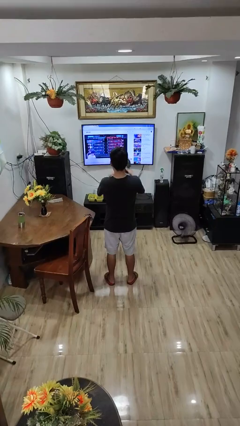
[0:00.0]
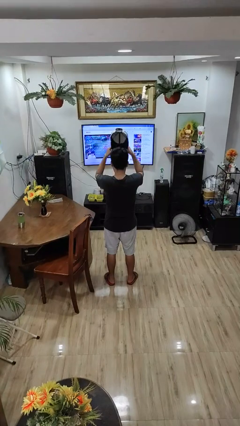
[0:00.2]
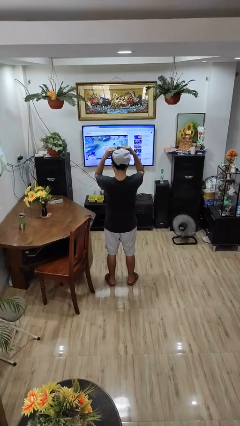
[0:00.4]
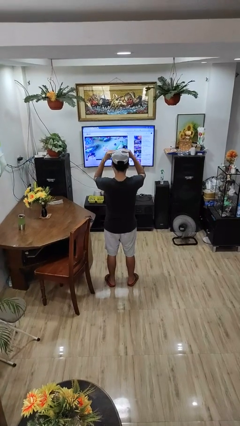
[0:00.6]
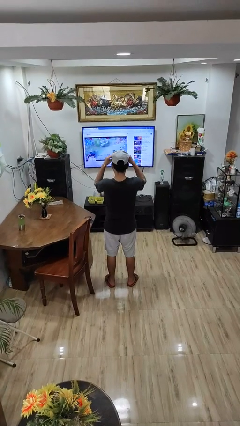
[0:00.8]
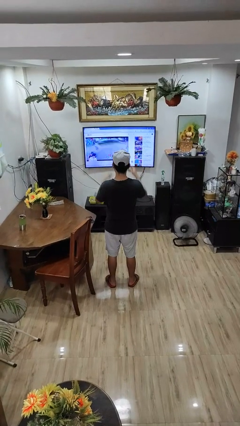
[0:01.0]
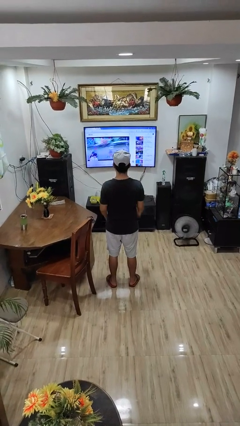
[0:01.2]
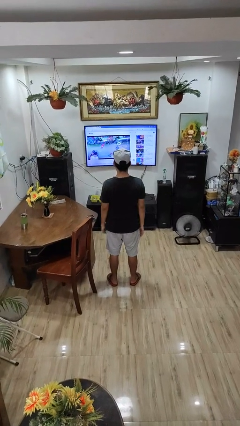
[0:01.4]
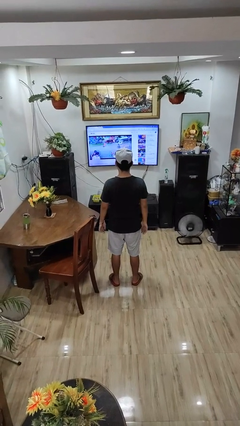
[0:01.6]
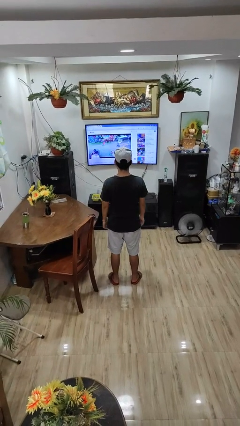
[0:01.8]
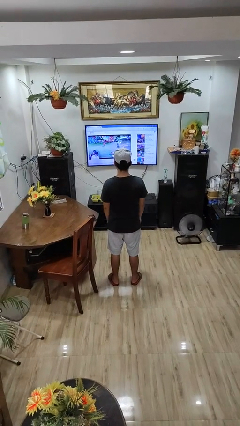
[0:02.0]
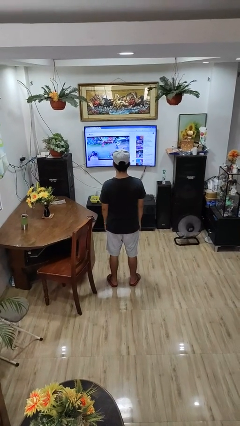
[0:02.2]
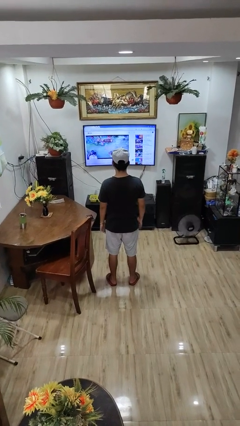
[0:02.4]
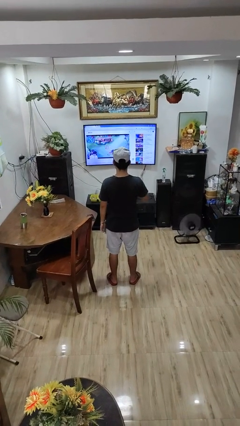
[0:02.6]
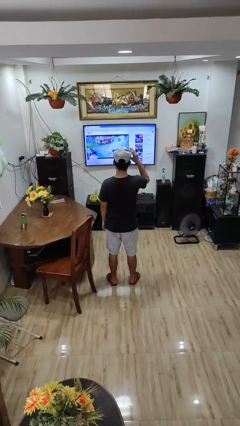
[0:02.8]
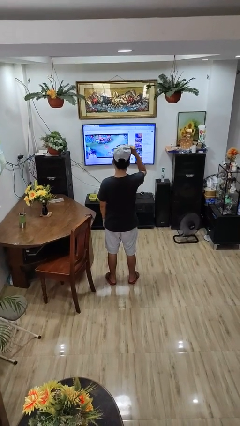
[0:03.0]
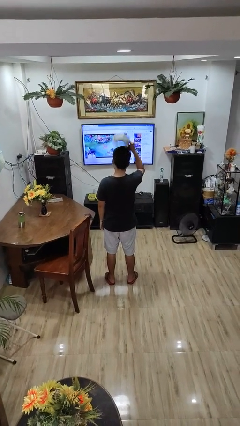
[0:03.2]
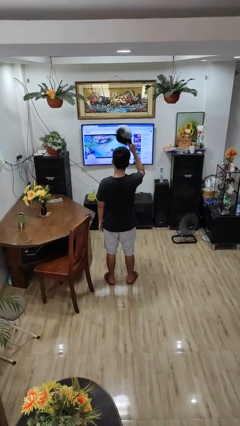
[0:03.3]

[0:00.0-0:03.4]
person sweeps floor

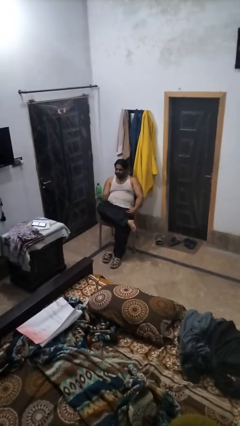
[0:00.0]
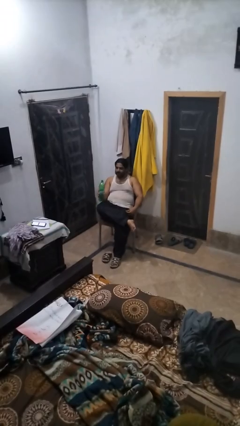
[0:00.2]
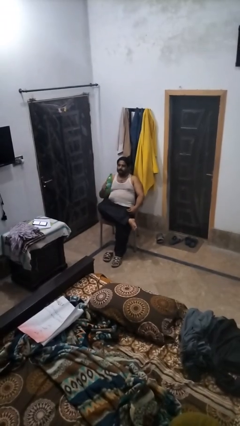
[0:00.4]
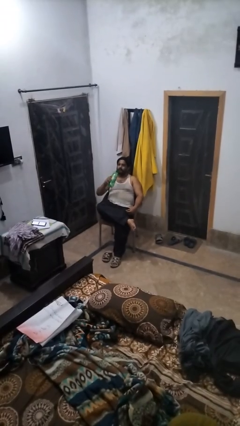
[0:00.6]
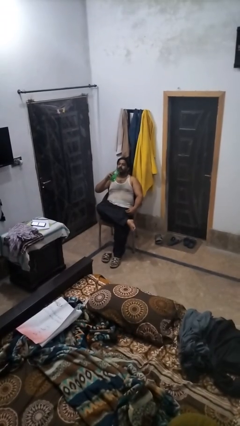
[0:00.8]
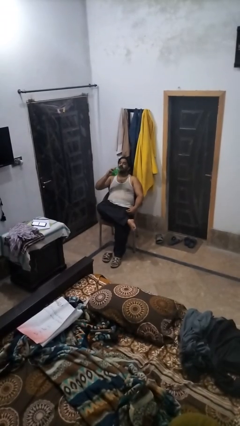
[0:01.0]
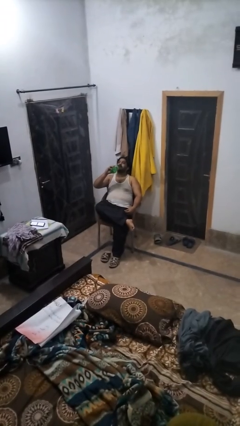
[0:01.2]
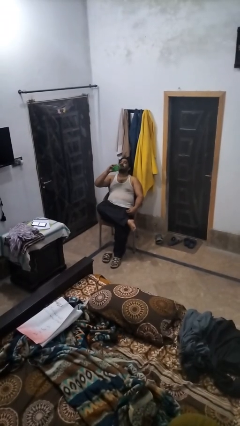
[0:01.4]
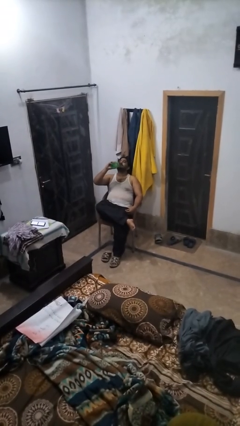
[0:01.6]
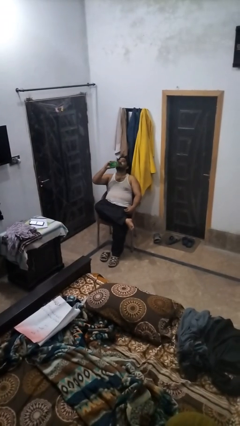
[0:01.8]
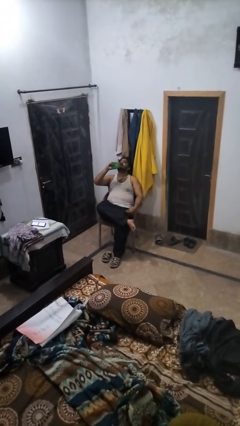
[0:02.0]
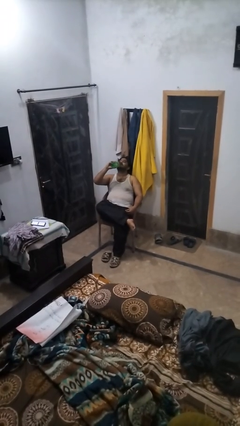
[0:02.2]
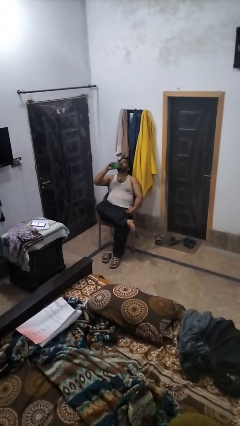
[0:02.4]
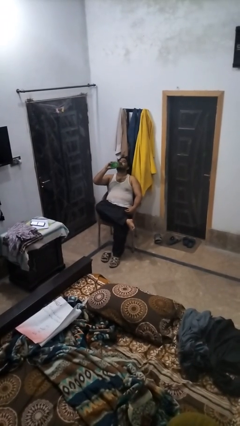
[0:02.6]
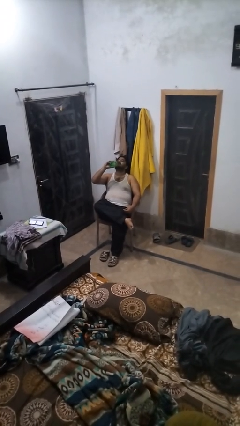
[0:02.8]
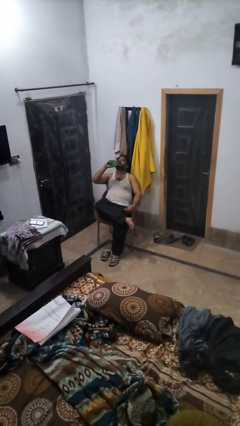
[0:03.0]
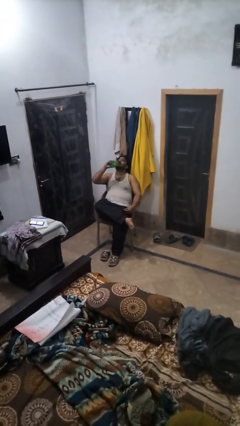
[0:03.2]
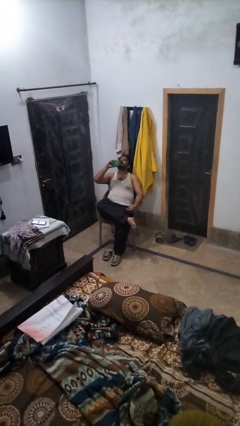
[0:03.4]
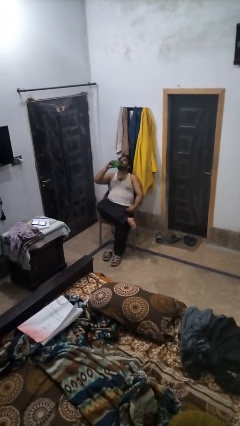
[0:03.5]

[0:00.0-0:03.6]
person drinks from bottle

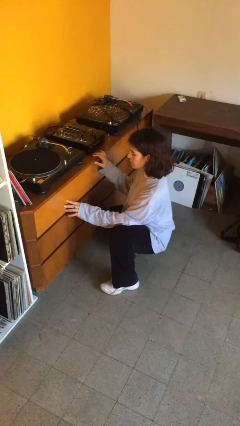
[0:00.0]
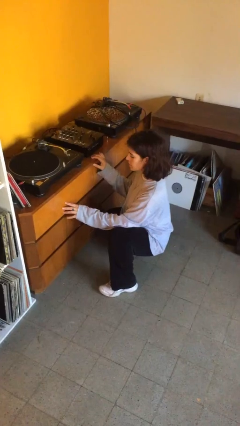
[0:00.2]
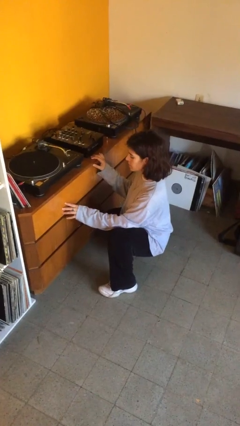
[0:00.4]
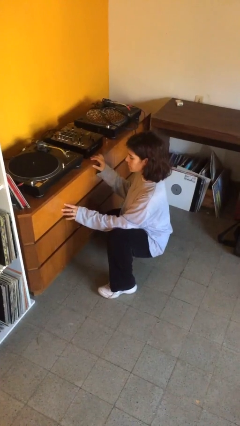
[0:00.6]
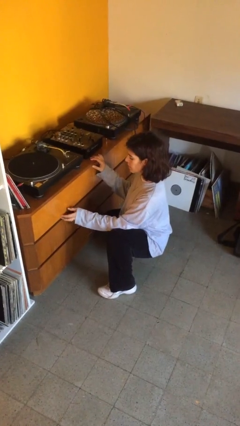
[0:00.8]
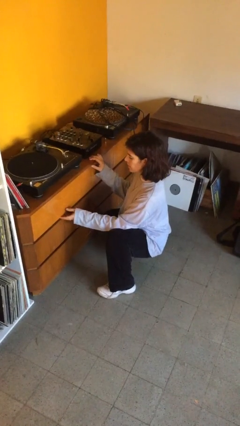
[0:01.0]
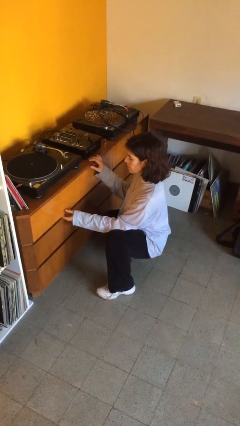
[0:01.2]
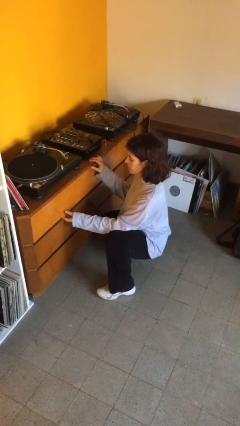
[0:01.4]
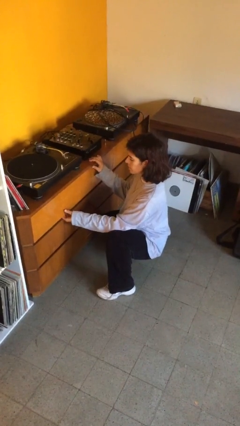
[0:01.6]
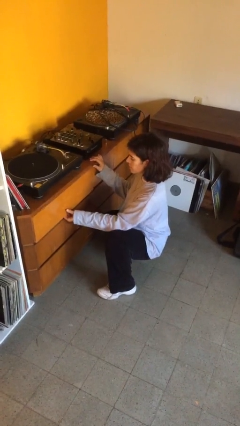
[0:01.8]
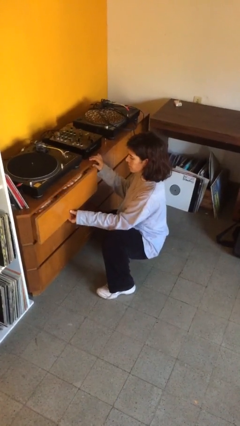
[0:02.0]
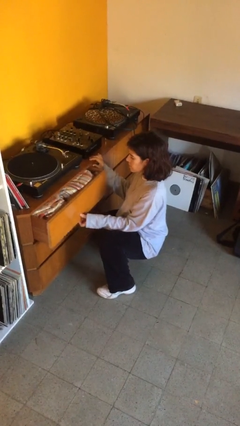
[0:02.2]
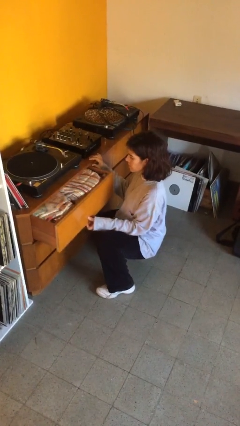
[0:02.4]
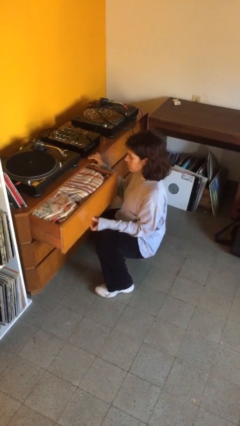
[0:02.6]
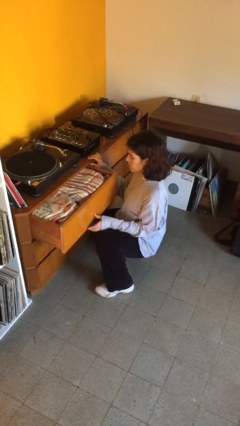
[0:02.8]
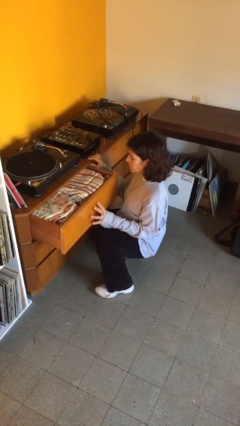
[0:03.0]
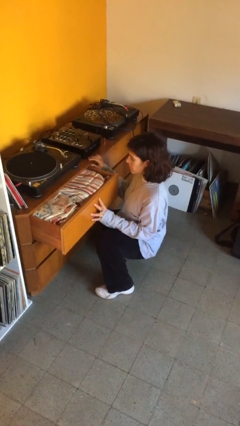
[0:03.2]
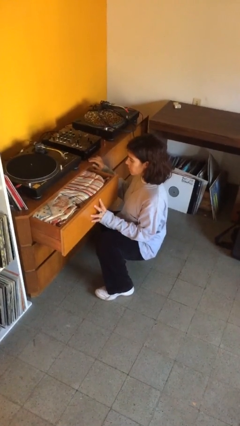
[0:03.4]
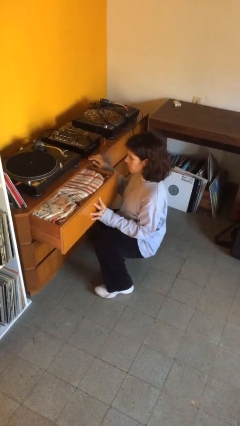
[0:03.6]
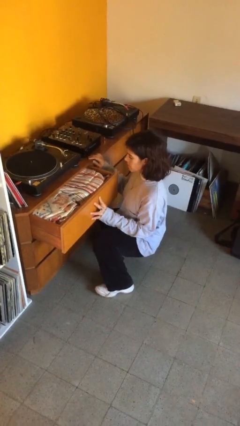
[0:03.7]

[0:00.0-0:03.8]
person opens dresser drawer

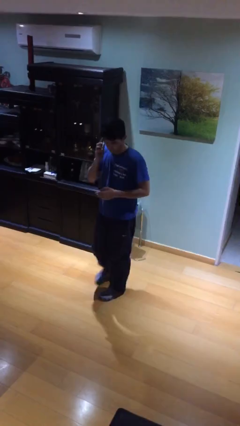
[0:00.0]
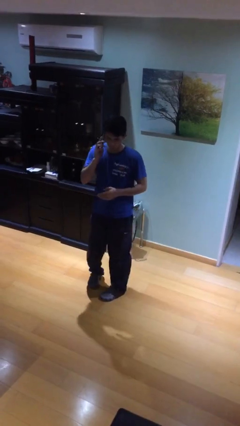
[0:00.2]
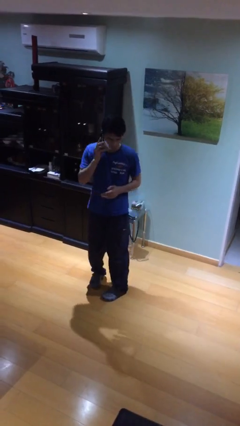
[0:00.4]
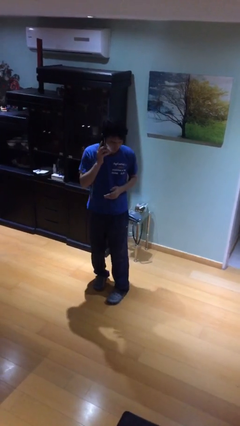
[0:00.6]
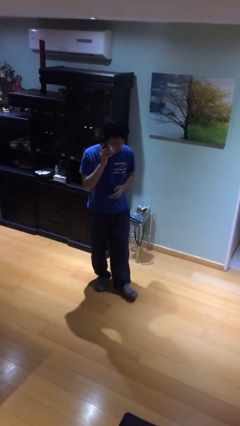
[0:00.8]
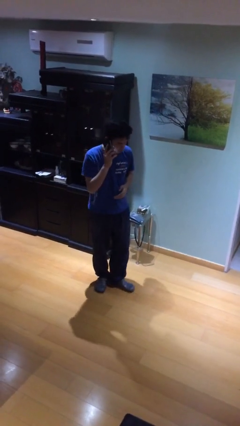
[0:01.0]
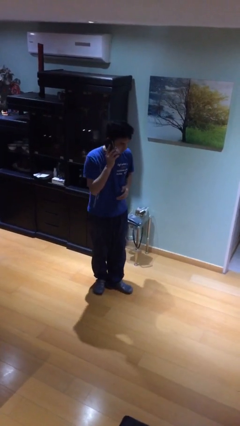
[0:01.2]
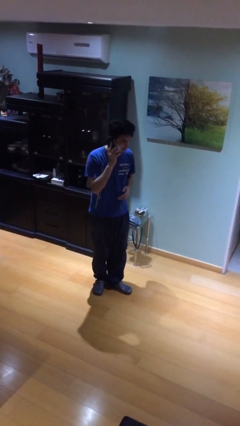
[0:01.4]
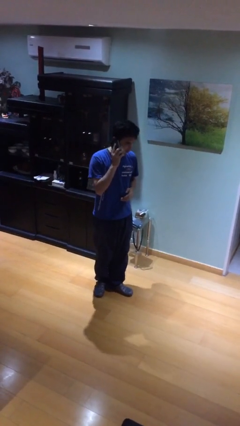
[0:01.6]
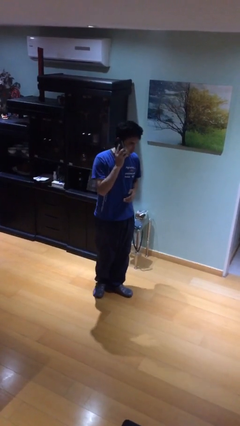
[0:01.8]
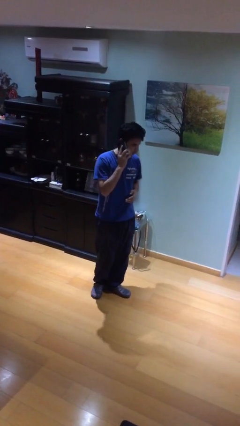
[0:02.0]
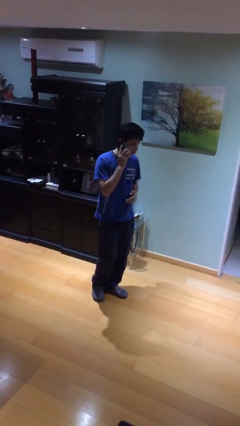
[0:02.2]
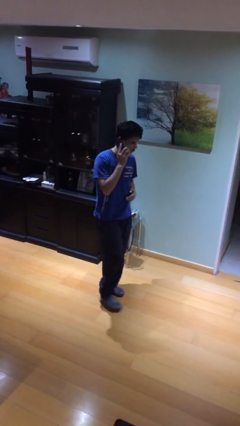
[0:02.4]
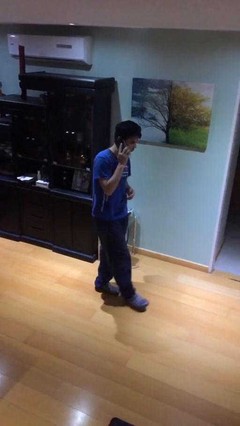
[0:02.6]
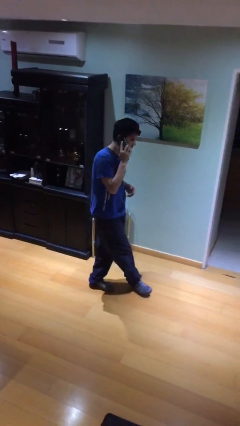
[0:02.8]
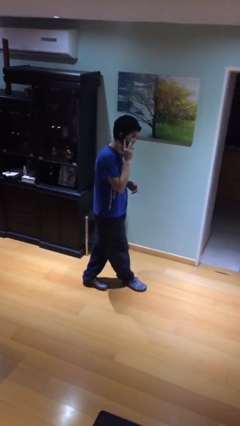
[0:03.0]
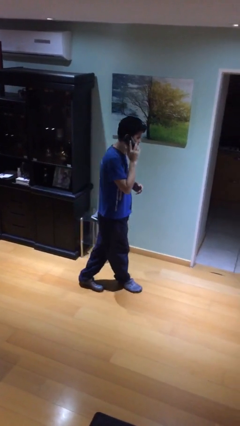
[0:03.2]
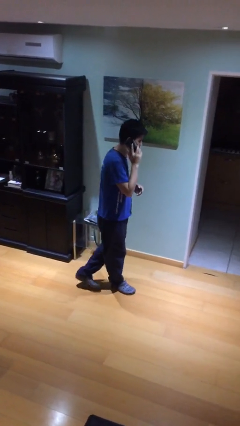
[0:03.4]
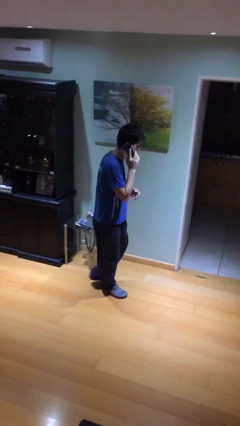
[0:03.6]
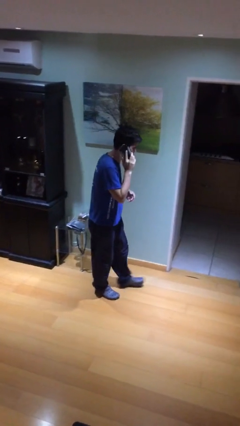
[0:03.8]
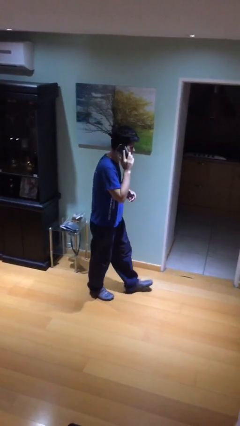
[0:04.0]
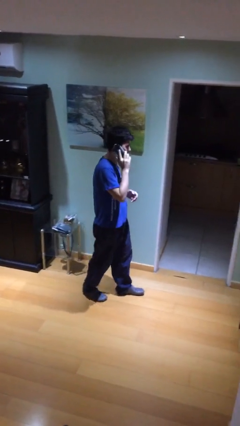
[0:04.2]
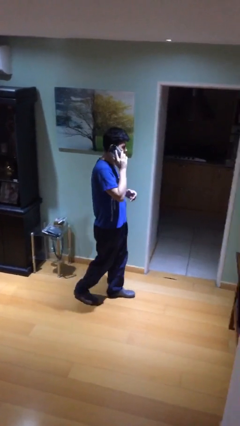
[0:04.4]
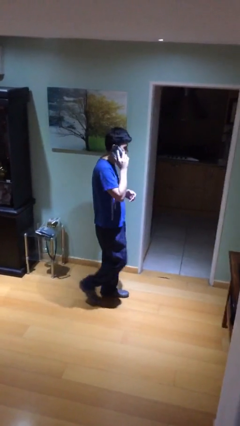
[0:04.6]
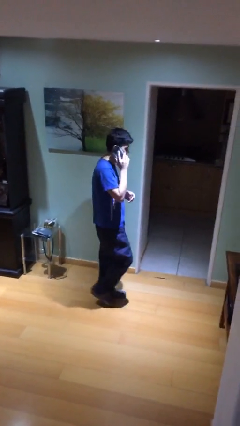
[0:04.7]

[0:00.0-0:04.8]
person talks on phone

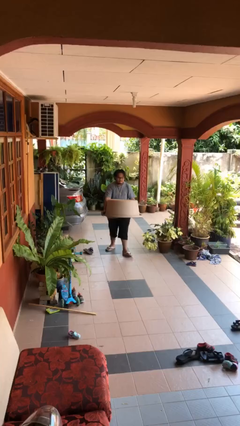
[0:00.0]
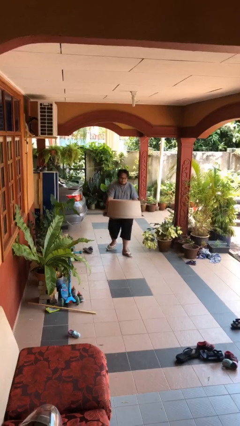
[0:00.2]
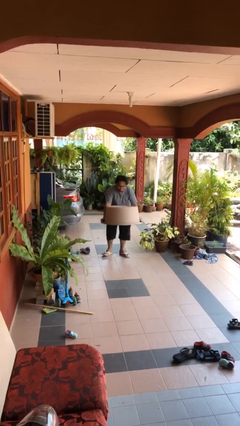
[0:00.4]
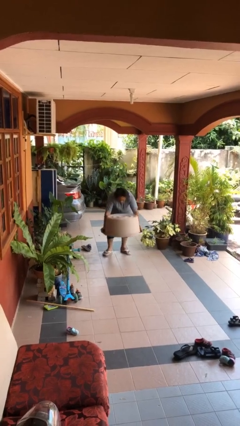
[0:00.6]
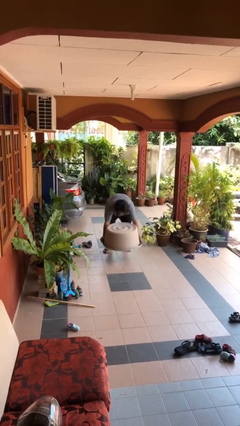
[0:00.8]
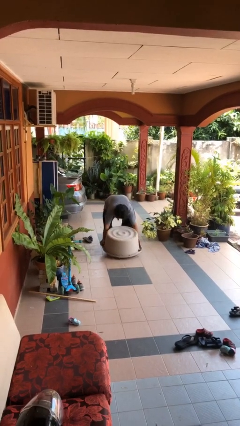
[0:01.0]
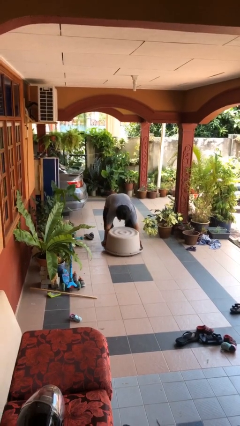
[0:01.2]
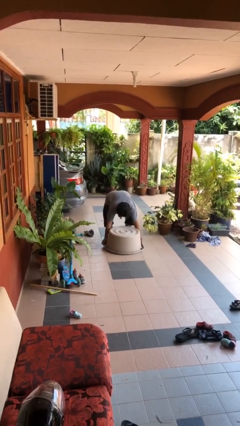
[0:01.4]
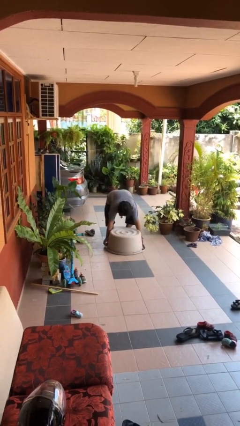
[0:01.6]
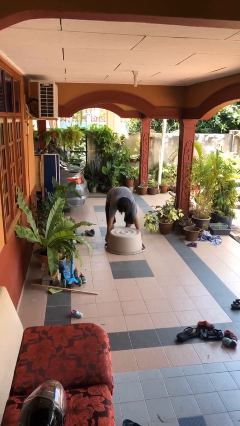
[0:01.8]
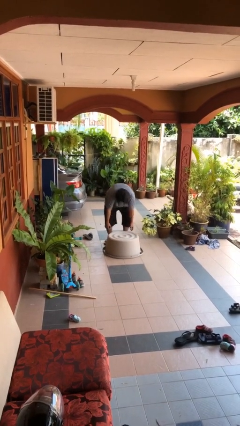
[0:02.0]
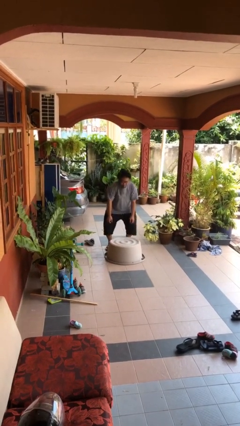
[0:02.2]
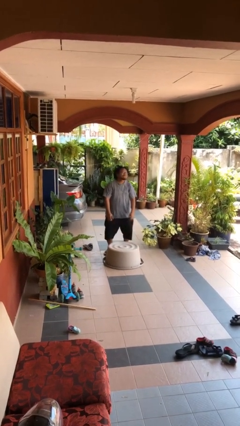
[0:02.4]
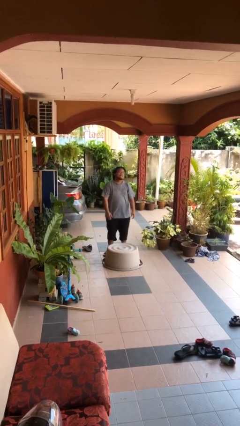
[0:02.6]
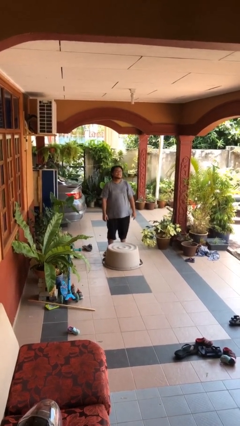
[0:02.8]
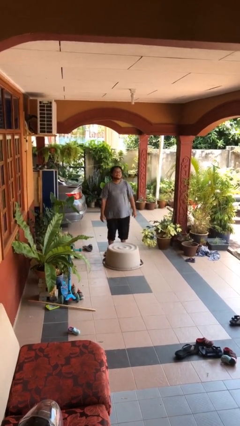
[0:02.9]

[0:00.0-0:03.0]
person puts down object on floor
